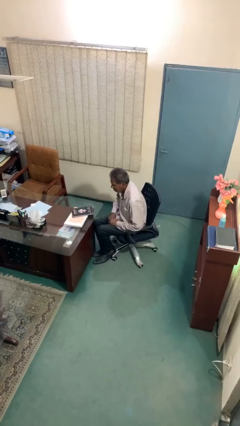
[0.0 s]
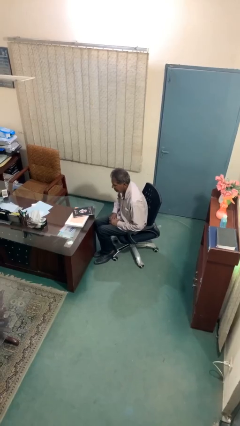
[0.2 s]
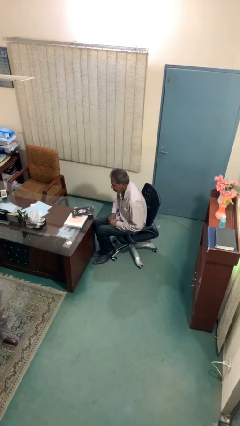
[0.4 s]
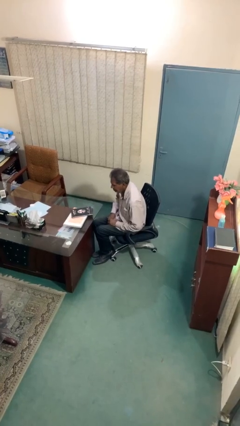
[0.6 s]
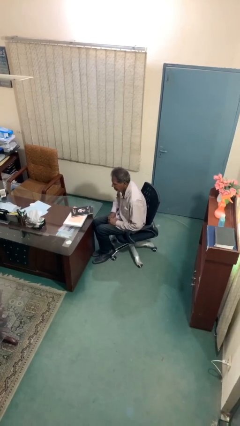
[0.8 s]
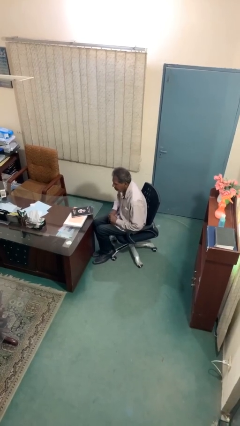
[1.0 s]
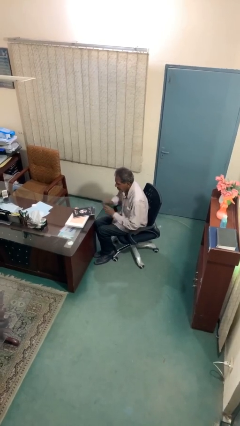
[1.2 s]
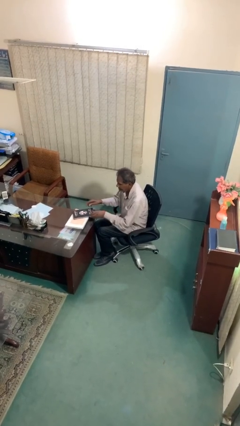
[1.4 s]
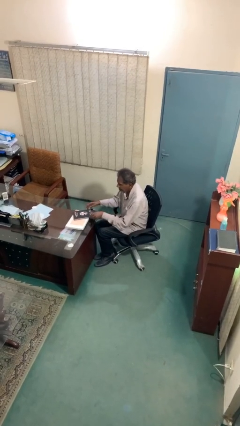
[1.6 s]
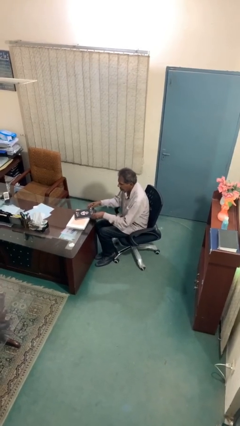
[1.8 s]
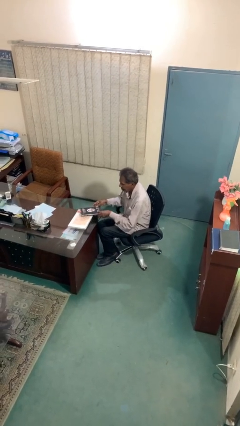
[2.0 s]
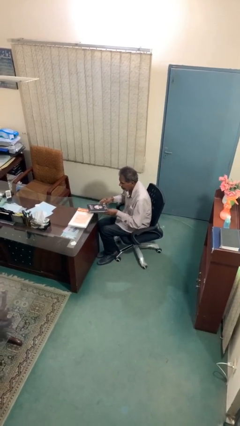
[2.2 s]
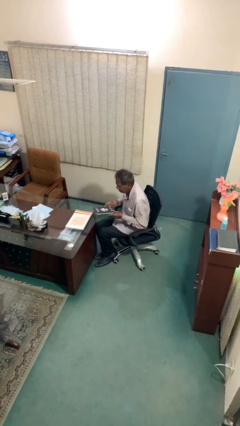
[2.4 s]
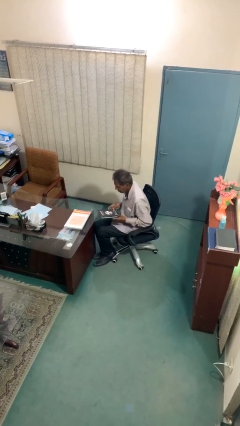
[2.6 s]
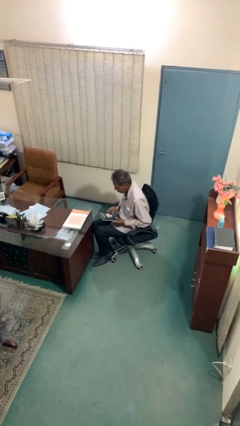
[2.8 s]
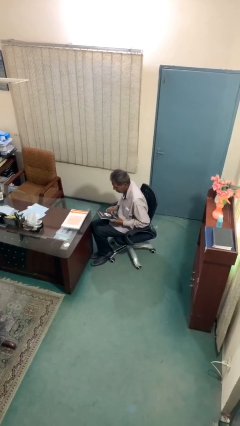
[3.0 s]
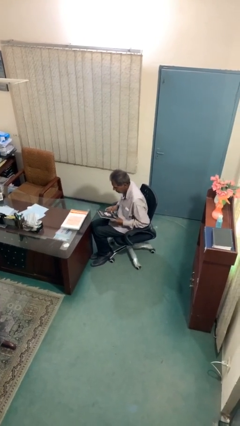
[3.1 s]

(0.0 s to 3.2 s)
person picks up object from table

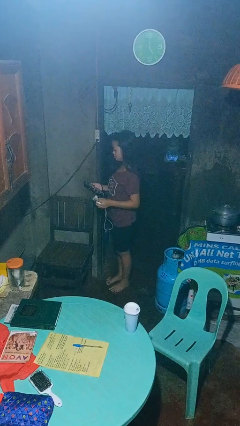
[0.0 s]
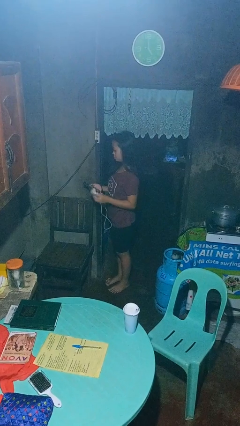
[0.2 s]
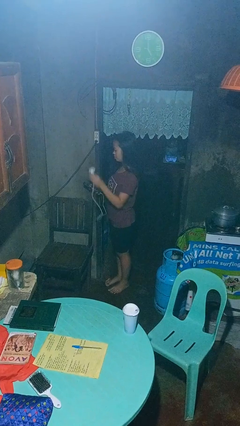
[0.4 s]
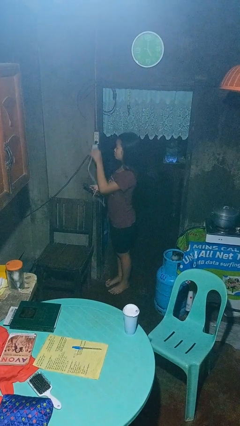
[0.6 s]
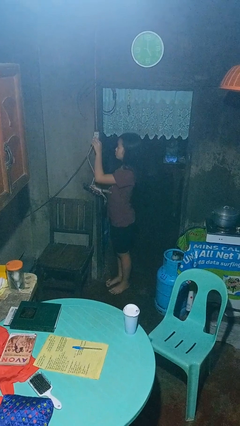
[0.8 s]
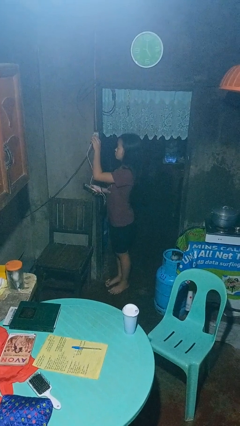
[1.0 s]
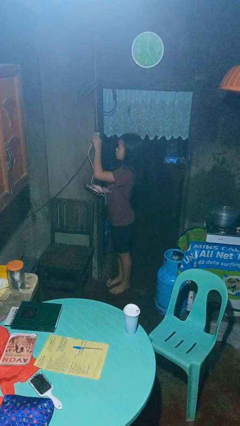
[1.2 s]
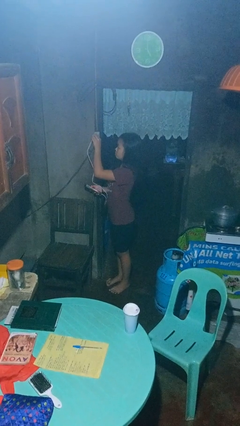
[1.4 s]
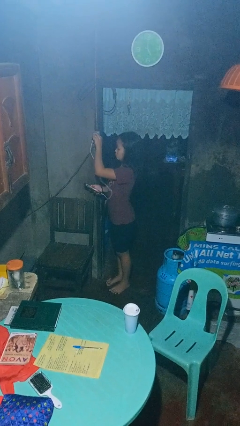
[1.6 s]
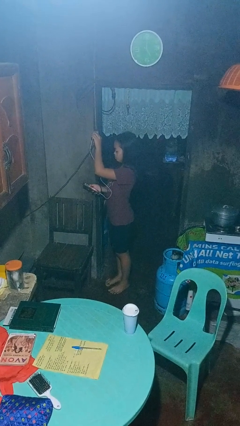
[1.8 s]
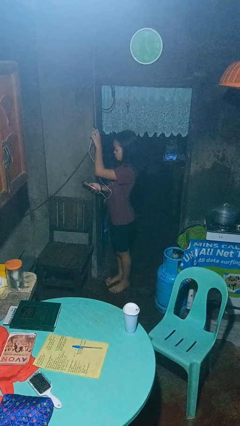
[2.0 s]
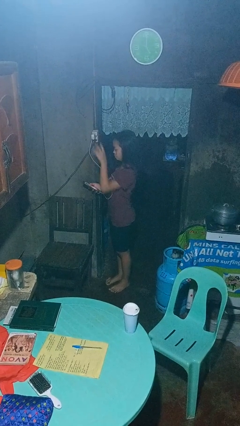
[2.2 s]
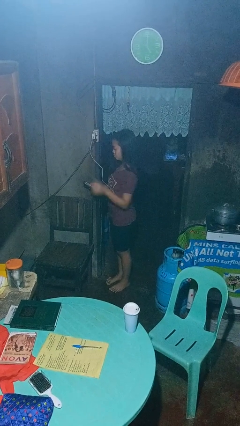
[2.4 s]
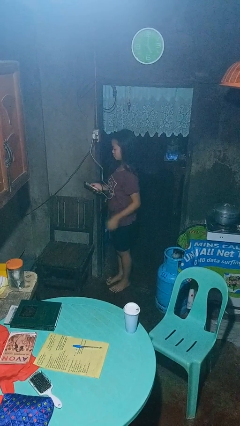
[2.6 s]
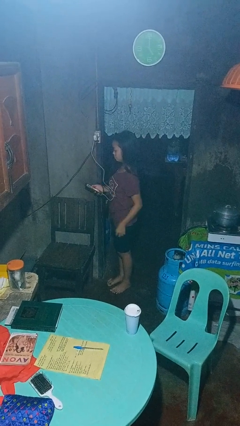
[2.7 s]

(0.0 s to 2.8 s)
person plugs into electrical socket

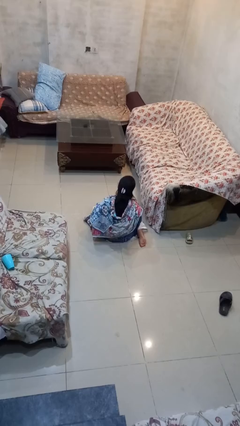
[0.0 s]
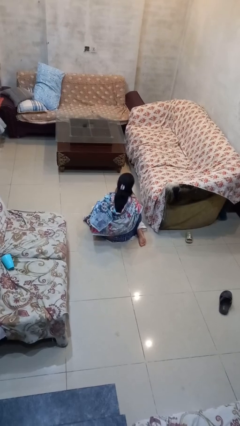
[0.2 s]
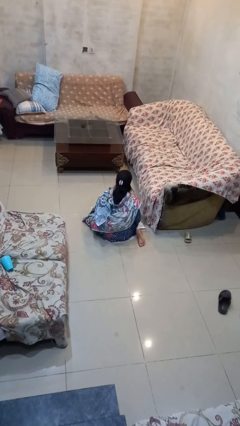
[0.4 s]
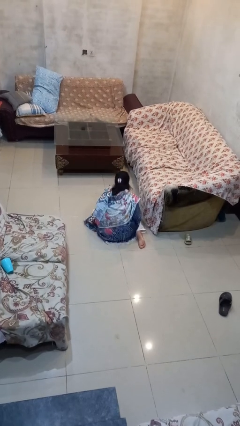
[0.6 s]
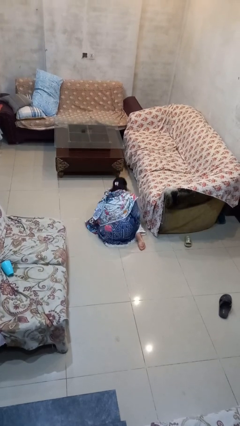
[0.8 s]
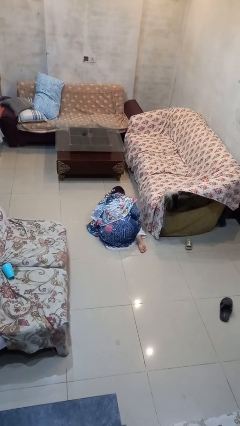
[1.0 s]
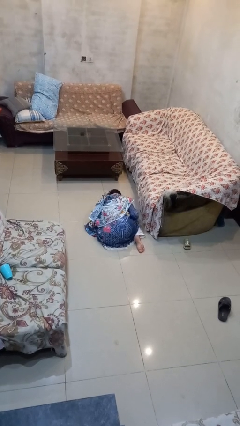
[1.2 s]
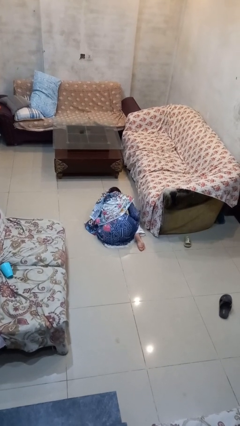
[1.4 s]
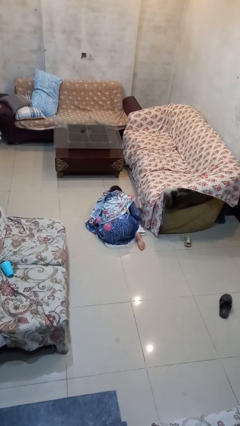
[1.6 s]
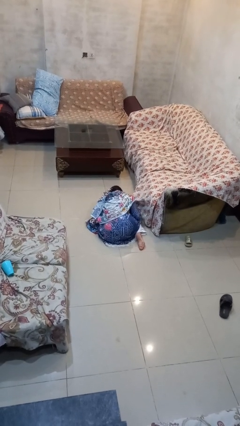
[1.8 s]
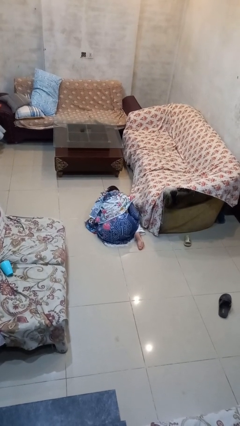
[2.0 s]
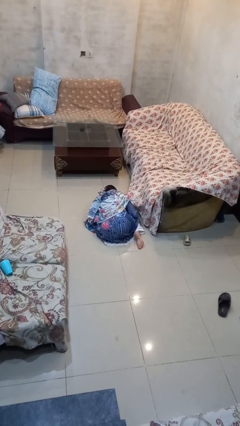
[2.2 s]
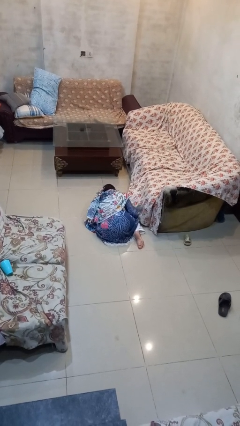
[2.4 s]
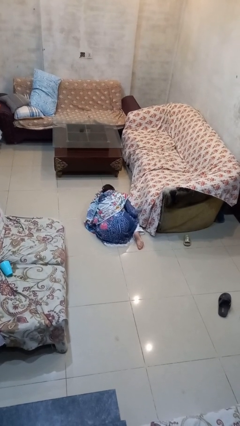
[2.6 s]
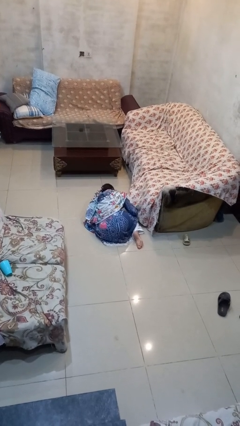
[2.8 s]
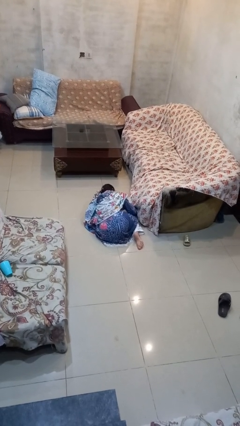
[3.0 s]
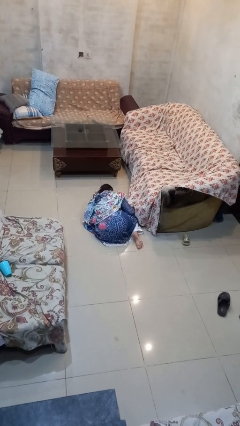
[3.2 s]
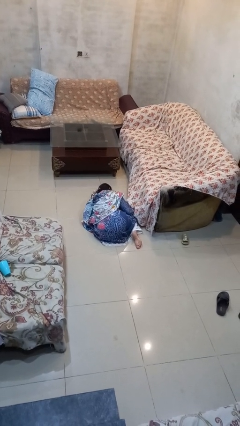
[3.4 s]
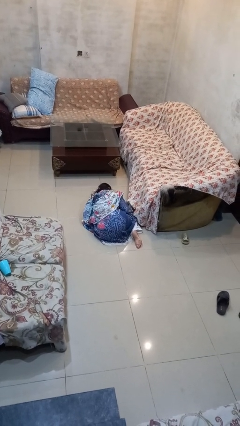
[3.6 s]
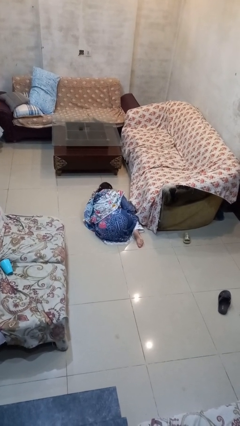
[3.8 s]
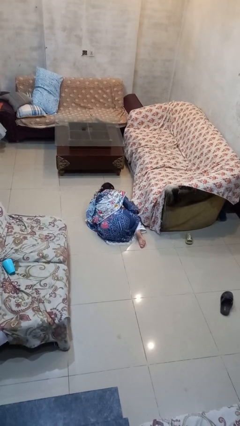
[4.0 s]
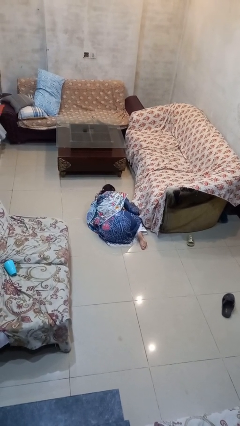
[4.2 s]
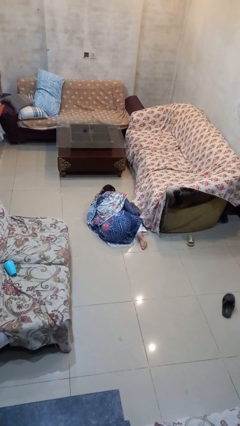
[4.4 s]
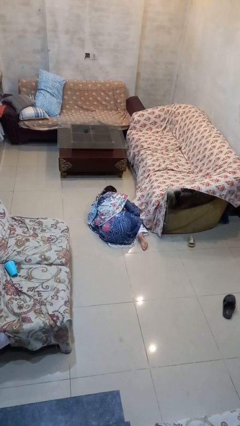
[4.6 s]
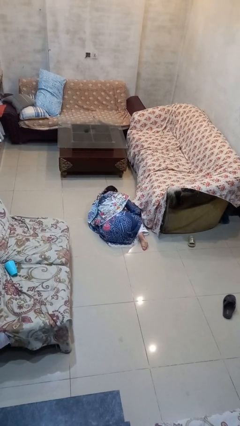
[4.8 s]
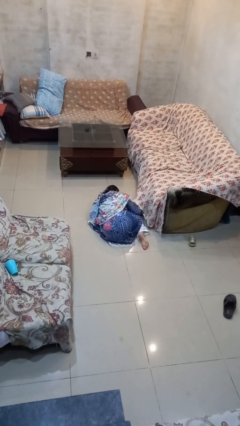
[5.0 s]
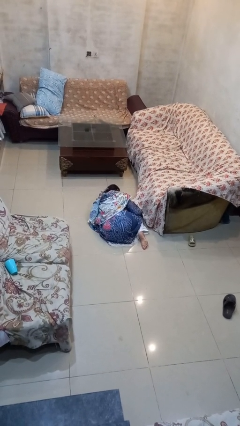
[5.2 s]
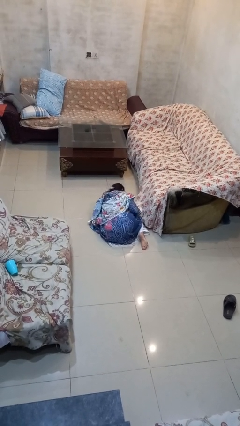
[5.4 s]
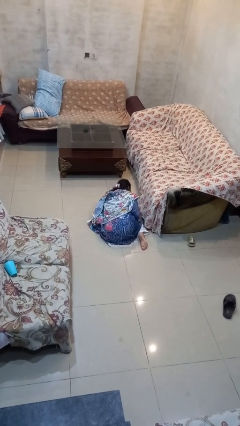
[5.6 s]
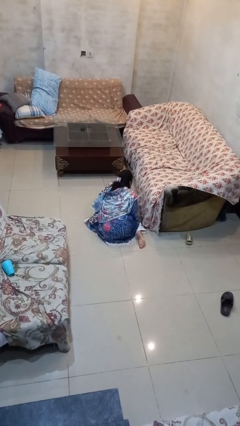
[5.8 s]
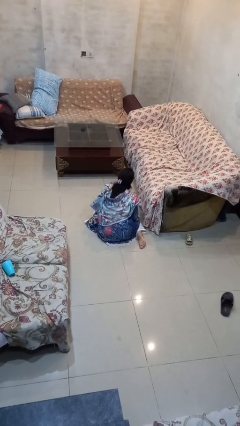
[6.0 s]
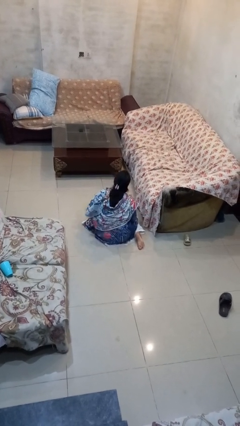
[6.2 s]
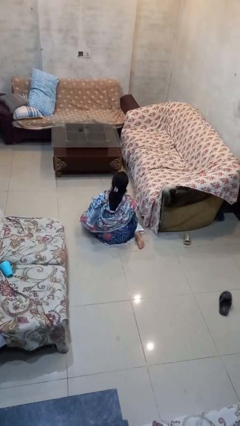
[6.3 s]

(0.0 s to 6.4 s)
person searches under couch

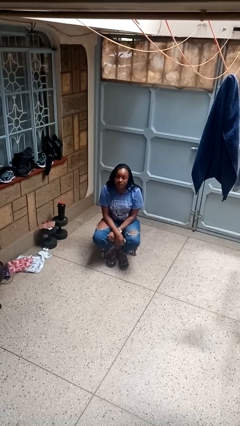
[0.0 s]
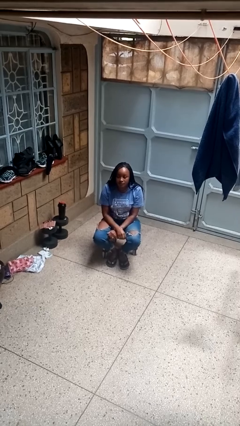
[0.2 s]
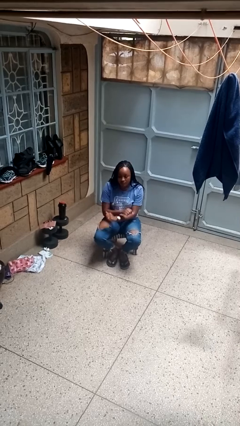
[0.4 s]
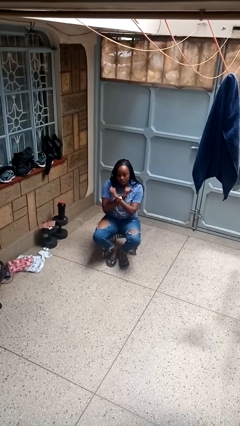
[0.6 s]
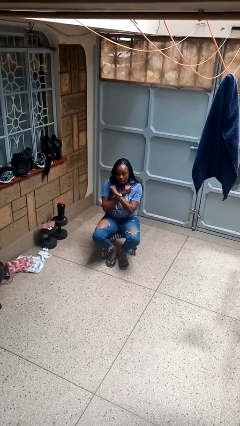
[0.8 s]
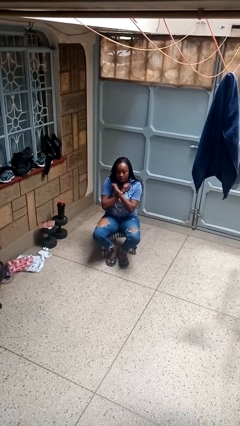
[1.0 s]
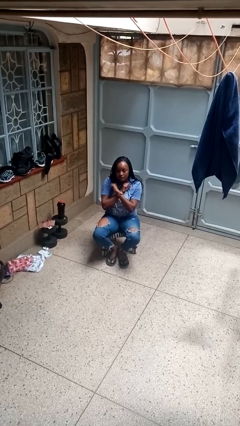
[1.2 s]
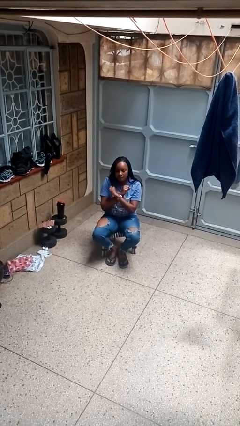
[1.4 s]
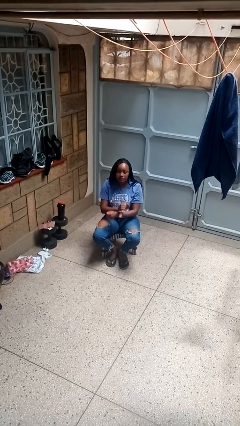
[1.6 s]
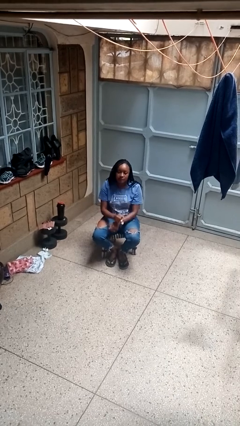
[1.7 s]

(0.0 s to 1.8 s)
person gestures arms x

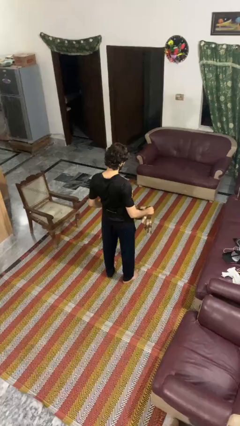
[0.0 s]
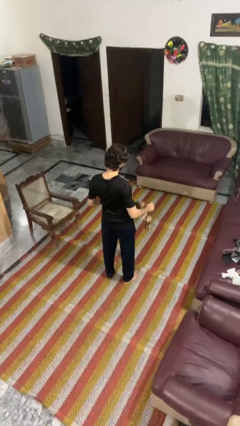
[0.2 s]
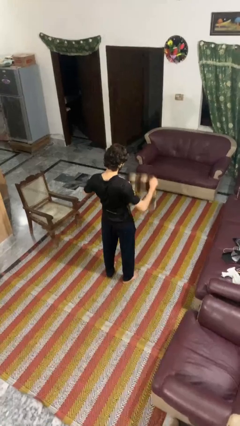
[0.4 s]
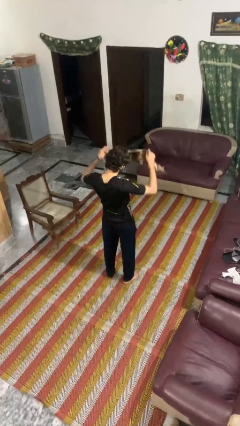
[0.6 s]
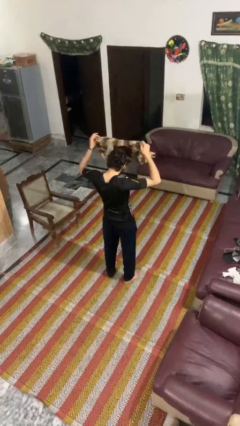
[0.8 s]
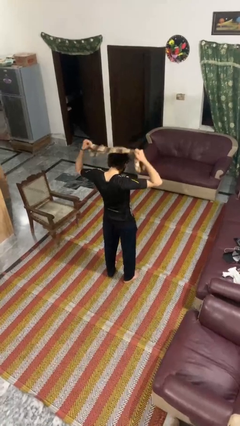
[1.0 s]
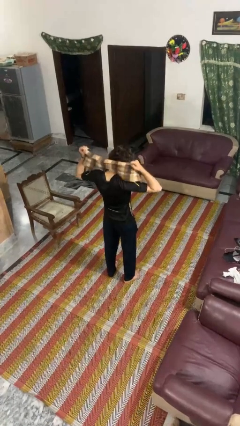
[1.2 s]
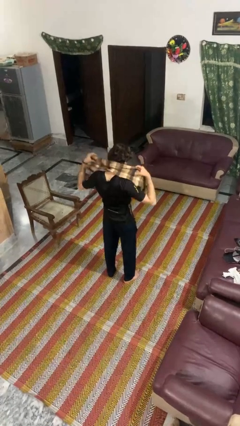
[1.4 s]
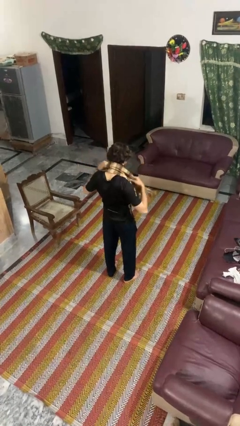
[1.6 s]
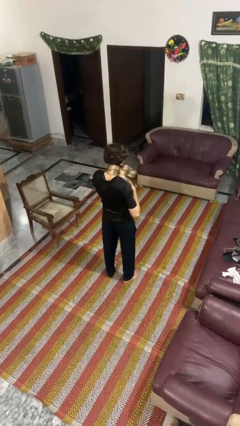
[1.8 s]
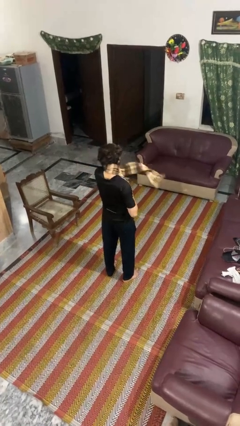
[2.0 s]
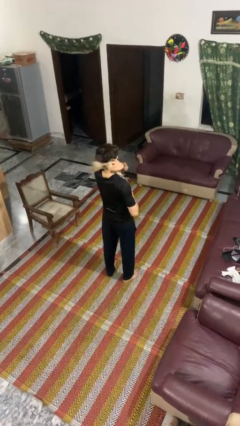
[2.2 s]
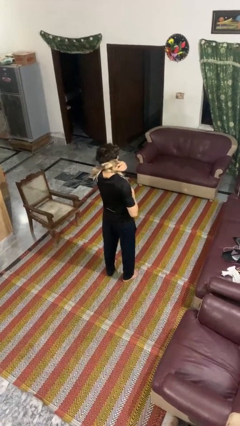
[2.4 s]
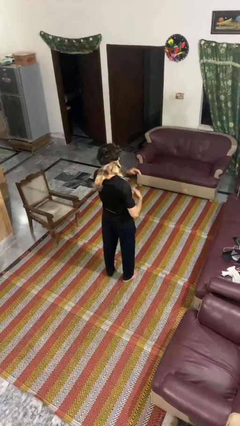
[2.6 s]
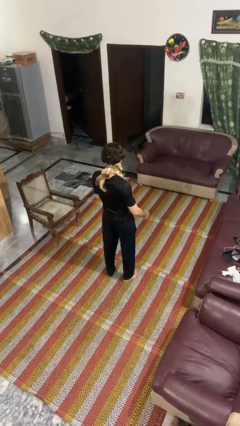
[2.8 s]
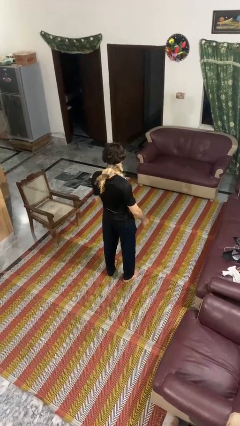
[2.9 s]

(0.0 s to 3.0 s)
person puts on scarf

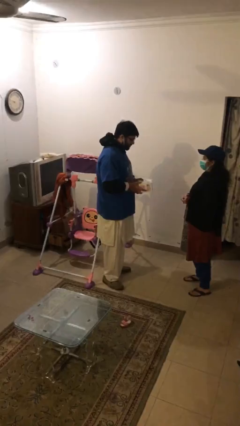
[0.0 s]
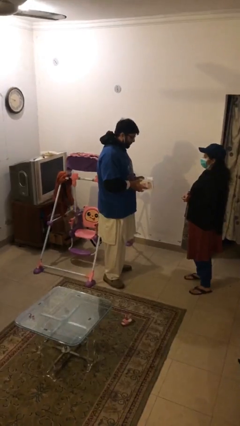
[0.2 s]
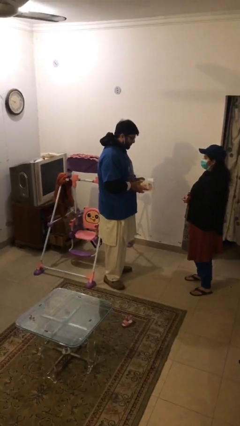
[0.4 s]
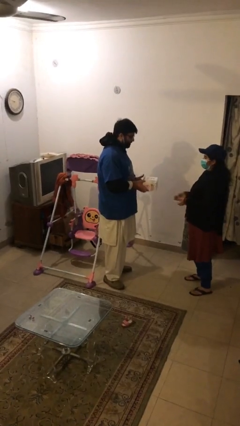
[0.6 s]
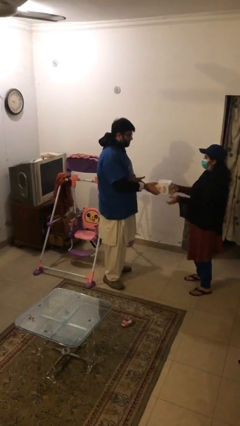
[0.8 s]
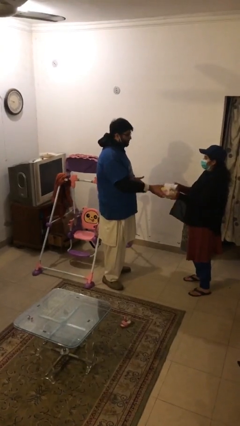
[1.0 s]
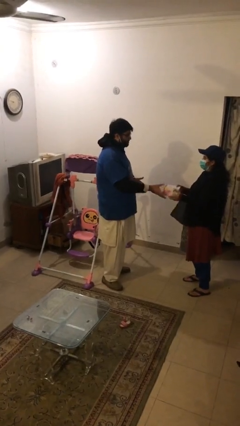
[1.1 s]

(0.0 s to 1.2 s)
person transfers object to person
